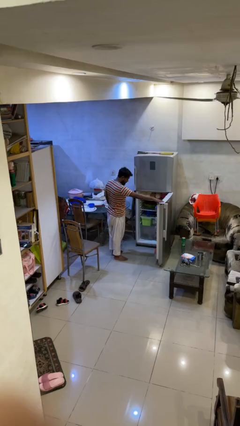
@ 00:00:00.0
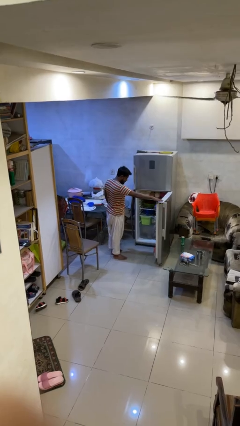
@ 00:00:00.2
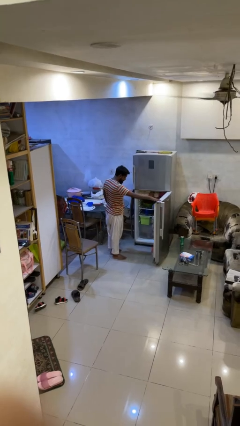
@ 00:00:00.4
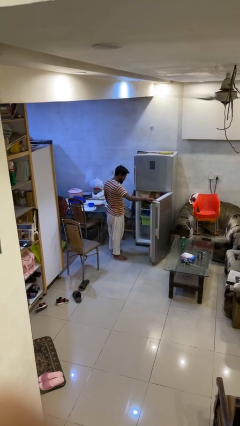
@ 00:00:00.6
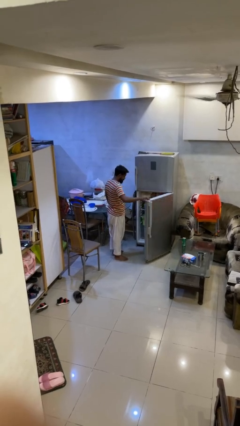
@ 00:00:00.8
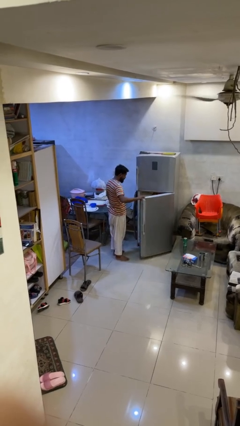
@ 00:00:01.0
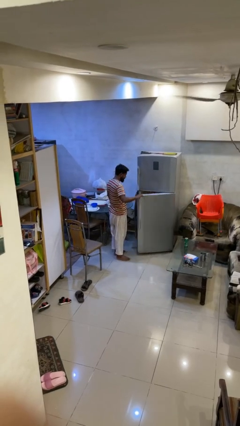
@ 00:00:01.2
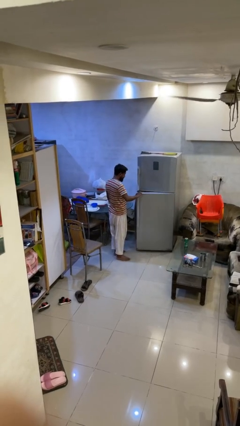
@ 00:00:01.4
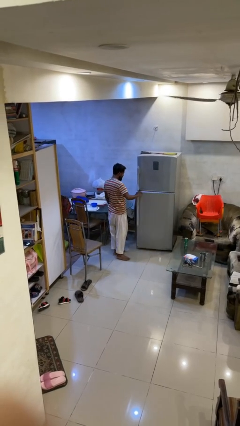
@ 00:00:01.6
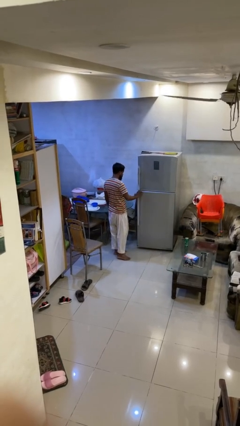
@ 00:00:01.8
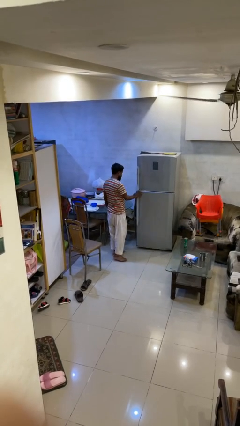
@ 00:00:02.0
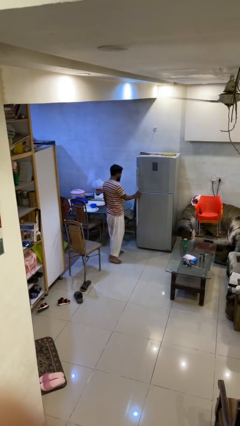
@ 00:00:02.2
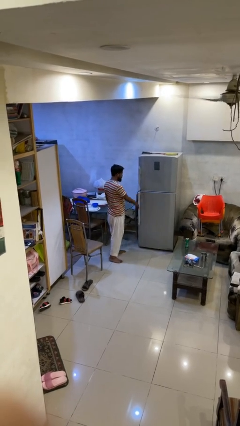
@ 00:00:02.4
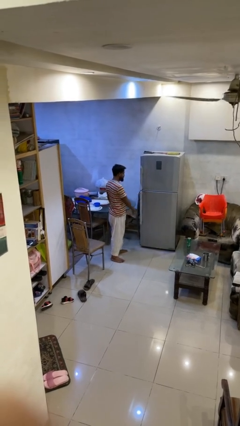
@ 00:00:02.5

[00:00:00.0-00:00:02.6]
person closes refrigerator

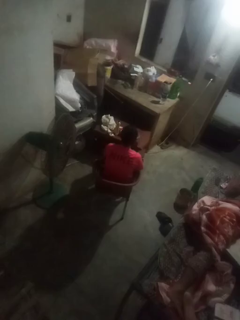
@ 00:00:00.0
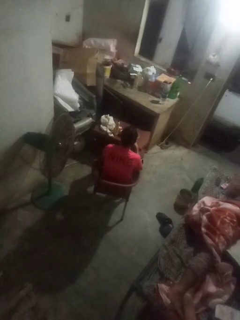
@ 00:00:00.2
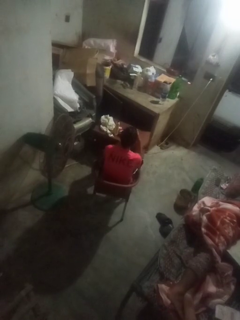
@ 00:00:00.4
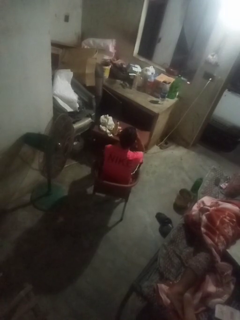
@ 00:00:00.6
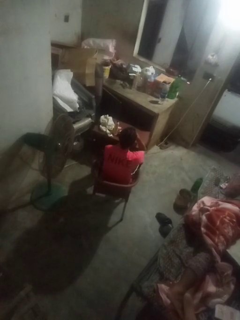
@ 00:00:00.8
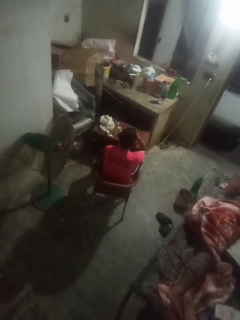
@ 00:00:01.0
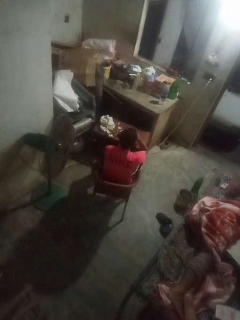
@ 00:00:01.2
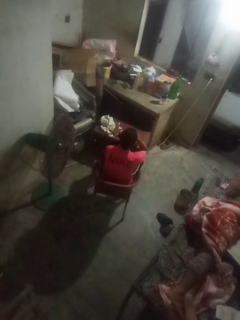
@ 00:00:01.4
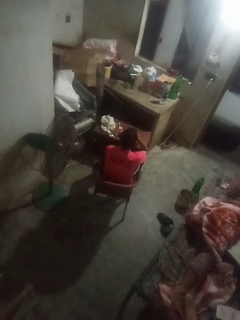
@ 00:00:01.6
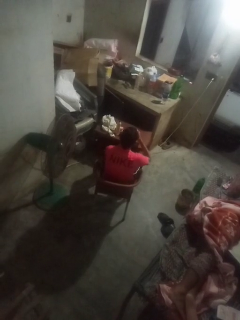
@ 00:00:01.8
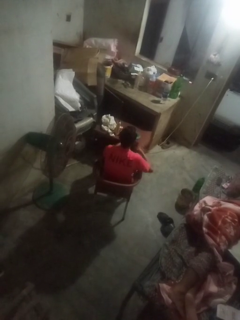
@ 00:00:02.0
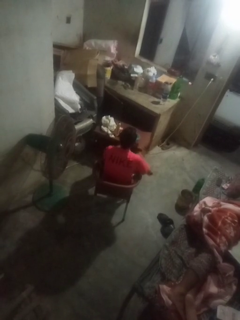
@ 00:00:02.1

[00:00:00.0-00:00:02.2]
person yawns

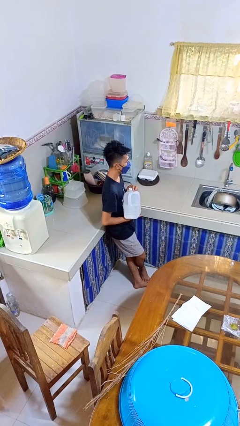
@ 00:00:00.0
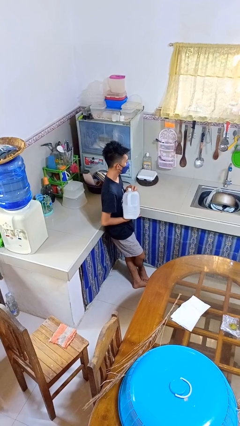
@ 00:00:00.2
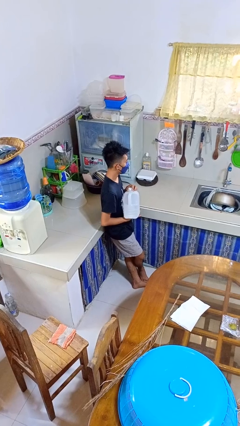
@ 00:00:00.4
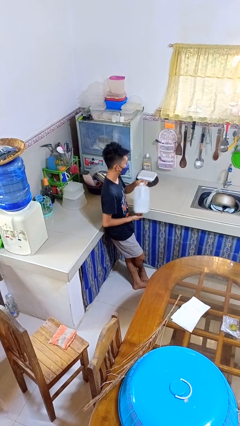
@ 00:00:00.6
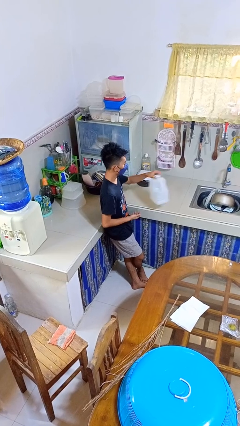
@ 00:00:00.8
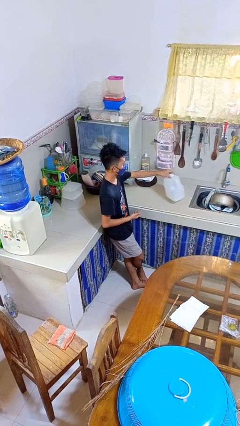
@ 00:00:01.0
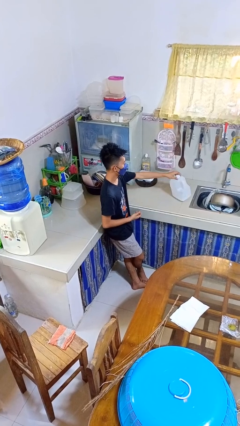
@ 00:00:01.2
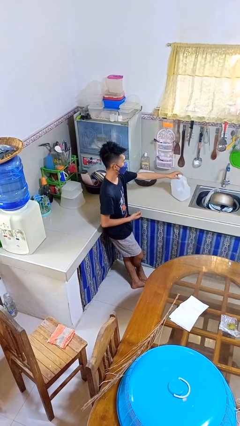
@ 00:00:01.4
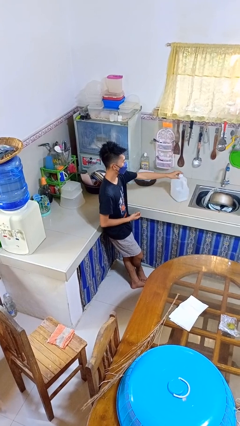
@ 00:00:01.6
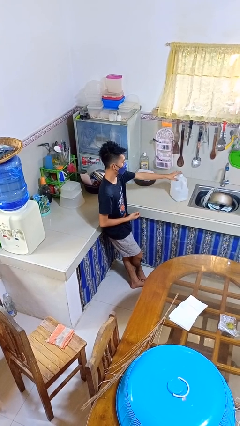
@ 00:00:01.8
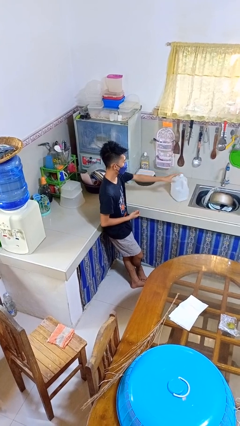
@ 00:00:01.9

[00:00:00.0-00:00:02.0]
person puts down object on countertop

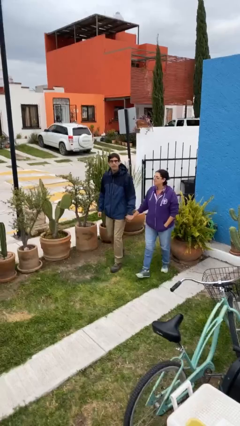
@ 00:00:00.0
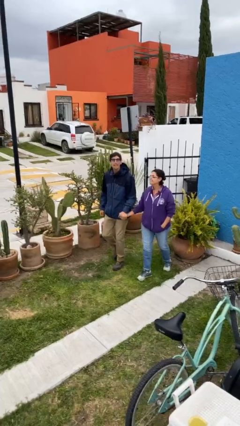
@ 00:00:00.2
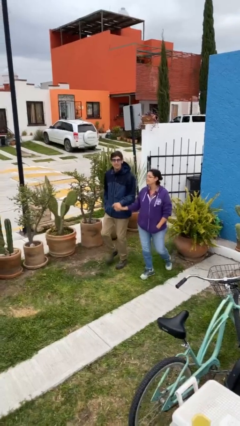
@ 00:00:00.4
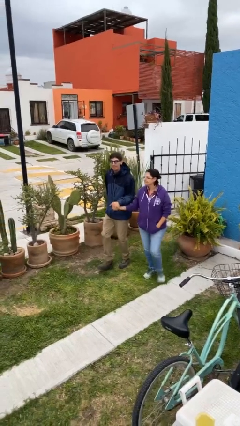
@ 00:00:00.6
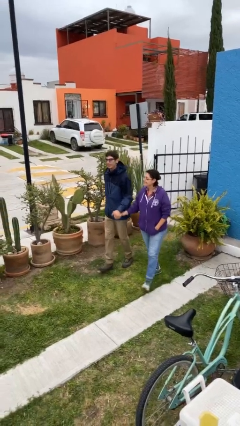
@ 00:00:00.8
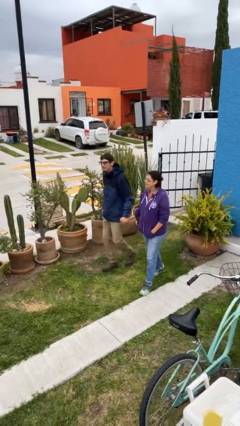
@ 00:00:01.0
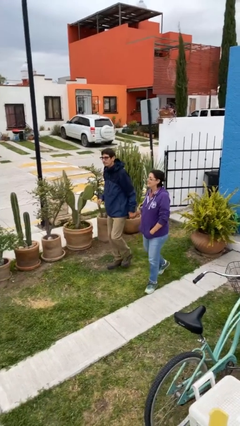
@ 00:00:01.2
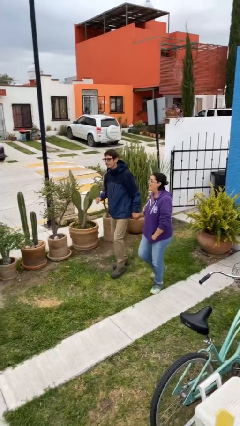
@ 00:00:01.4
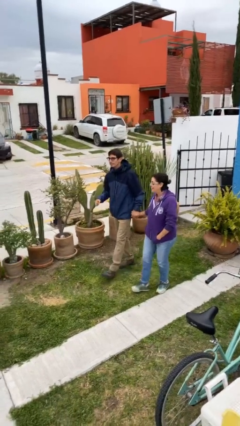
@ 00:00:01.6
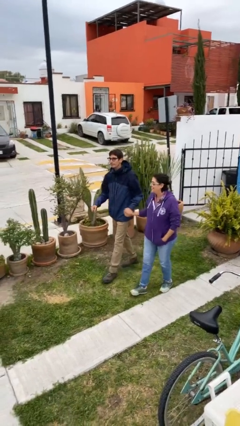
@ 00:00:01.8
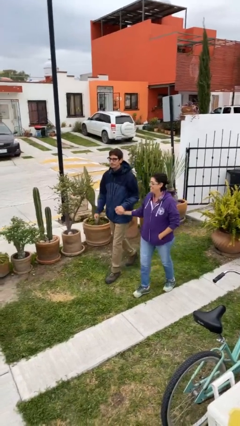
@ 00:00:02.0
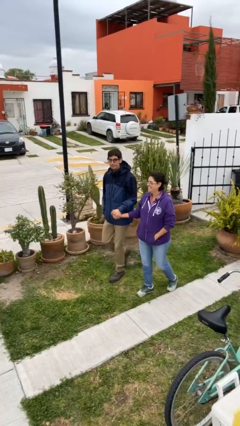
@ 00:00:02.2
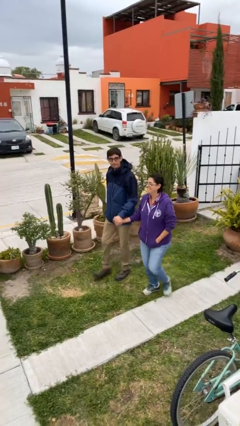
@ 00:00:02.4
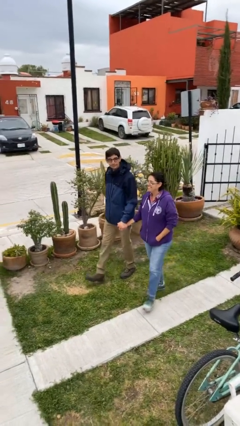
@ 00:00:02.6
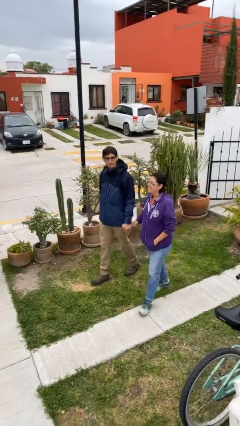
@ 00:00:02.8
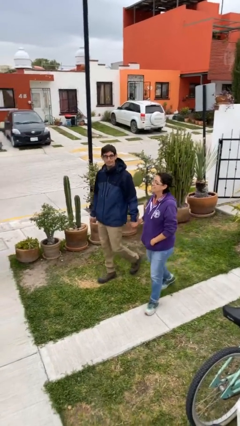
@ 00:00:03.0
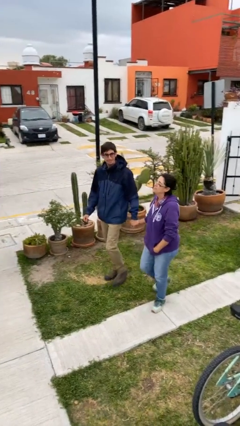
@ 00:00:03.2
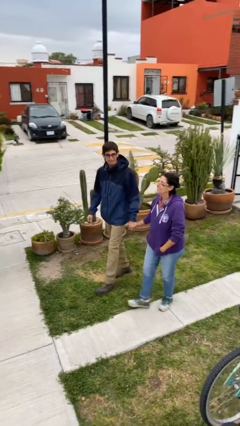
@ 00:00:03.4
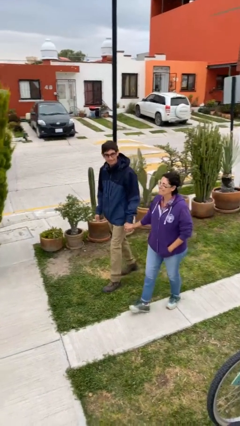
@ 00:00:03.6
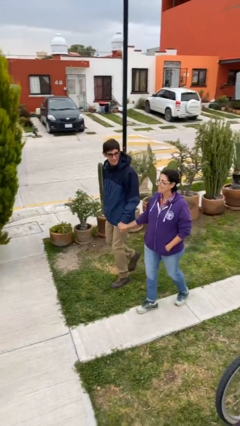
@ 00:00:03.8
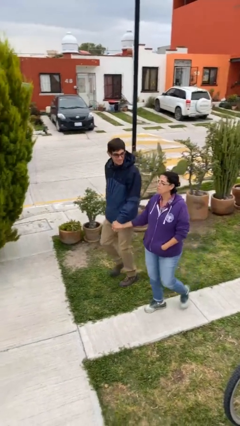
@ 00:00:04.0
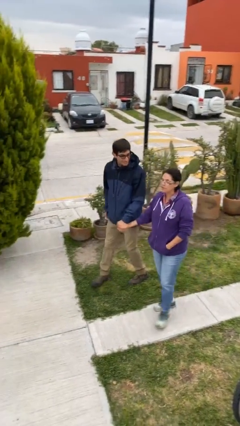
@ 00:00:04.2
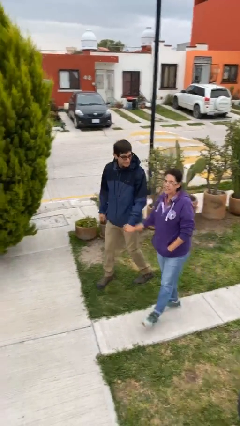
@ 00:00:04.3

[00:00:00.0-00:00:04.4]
person holds hand

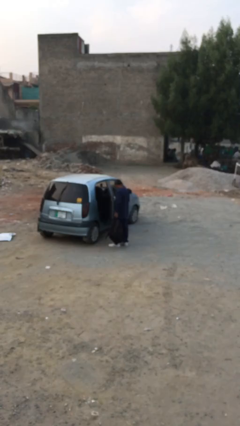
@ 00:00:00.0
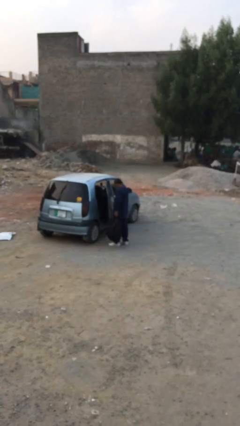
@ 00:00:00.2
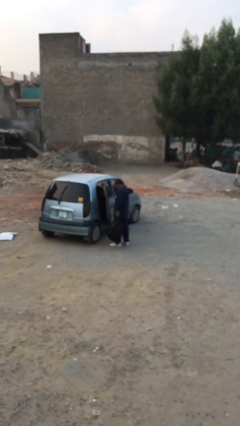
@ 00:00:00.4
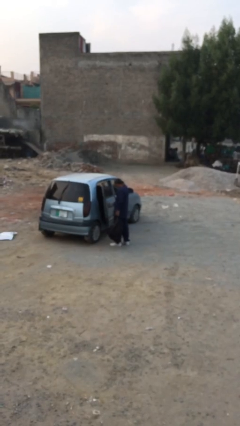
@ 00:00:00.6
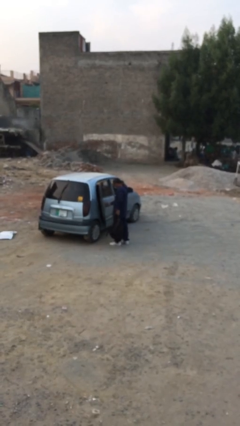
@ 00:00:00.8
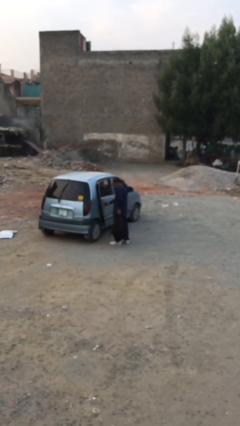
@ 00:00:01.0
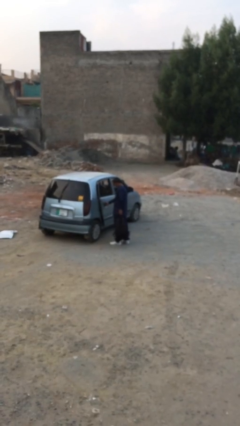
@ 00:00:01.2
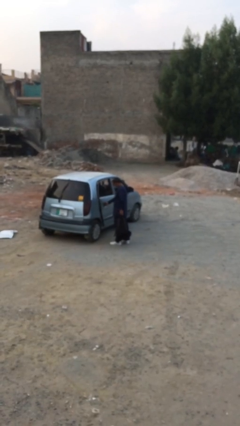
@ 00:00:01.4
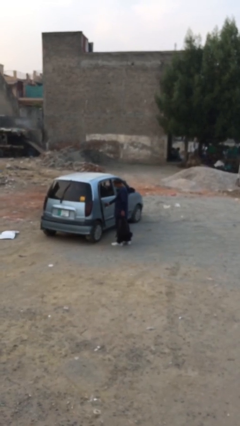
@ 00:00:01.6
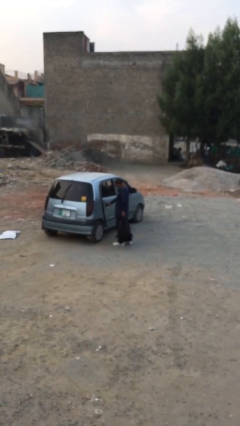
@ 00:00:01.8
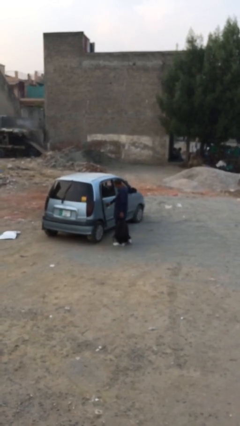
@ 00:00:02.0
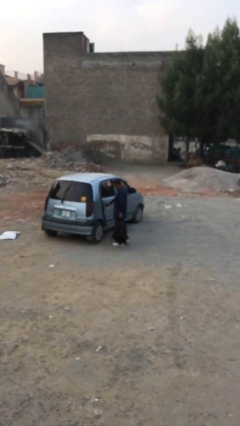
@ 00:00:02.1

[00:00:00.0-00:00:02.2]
person closes car door

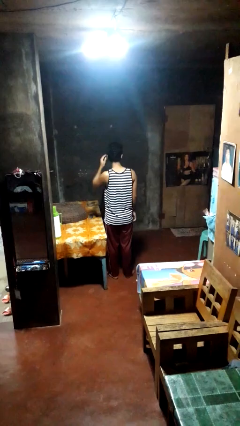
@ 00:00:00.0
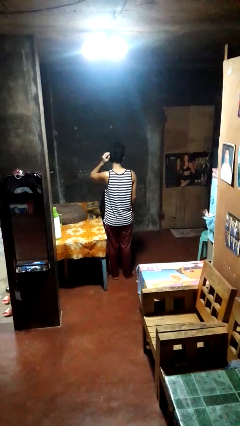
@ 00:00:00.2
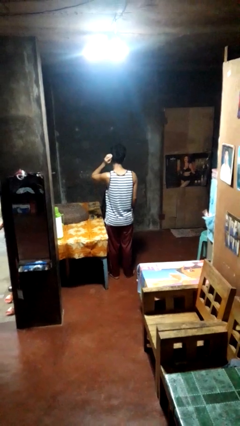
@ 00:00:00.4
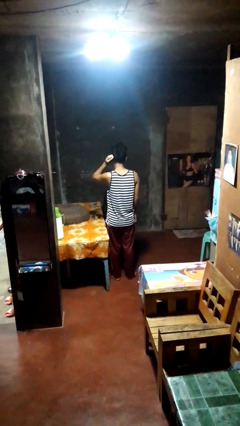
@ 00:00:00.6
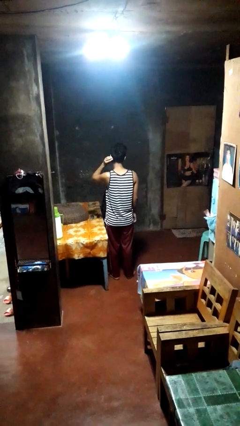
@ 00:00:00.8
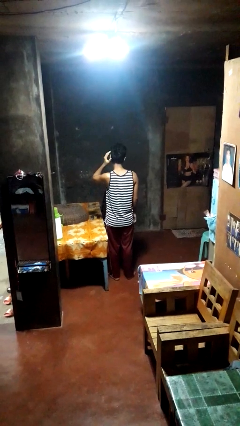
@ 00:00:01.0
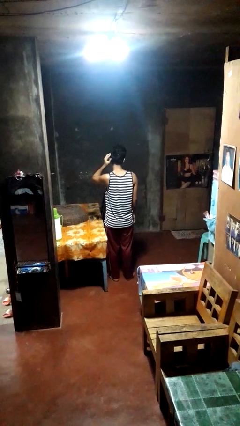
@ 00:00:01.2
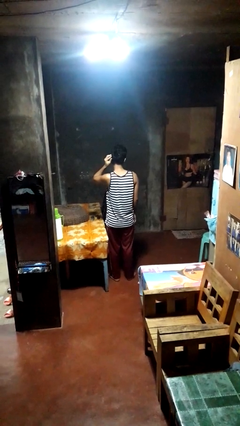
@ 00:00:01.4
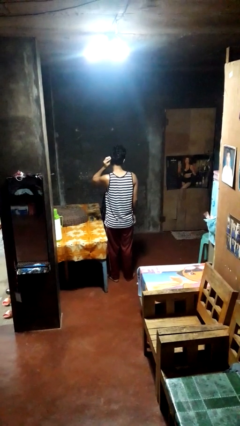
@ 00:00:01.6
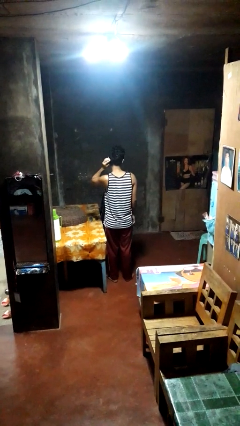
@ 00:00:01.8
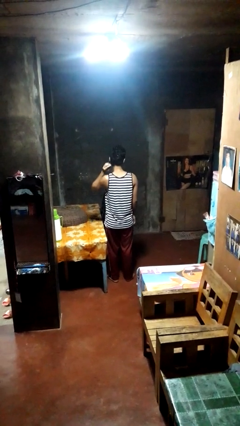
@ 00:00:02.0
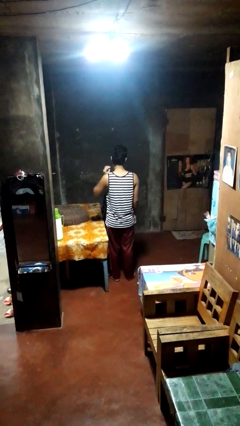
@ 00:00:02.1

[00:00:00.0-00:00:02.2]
person strokes hair

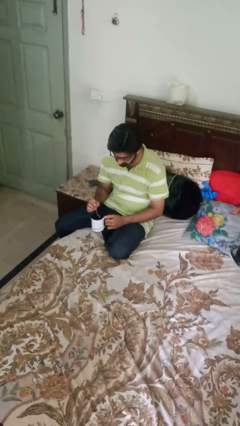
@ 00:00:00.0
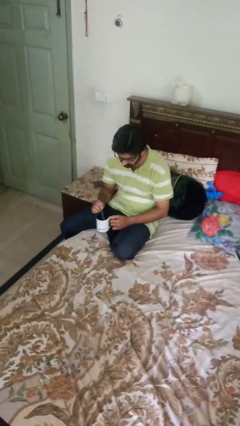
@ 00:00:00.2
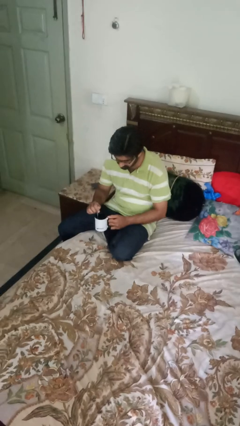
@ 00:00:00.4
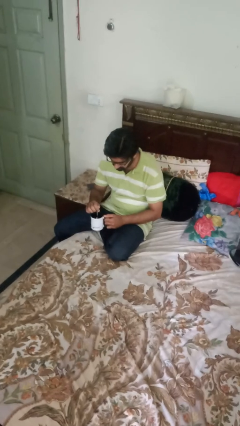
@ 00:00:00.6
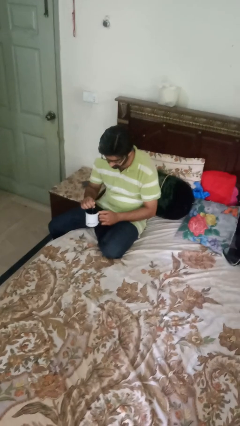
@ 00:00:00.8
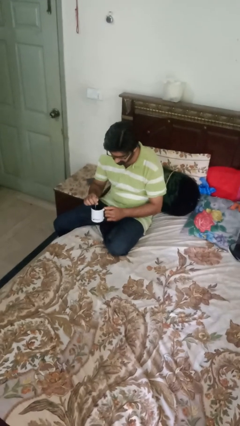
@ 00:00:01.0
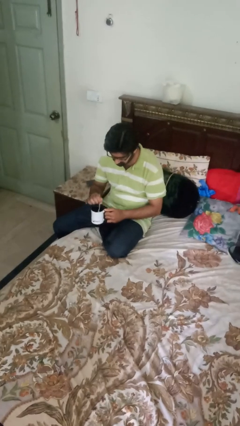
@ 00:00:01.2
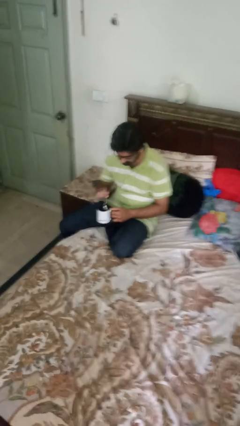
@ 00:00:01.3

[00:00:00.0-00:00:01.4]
person stirs mug

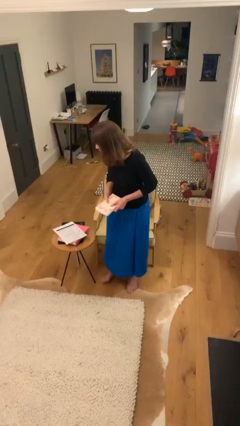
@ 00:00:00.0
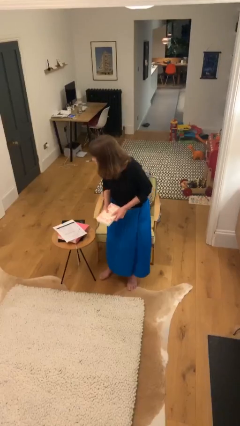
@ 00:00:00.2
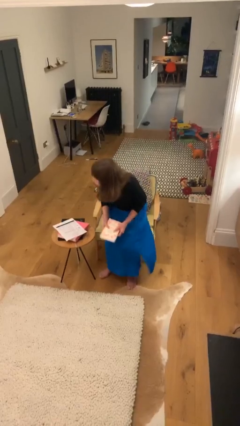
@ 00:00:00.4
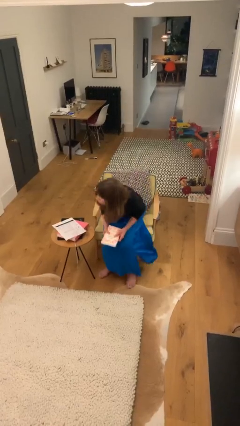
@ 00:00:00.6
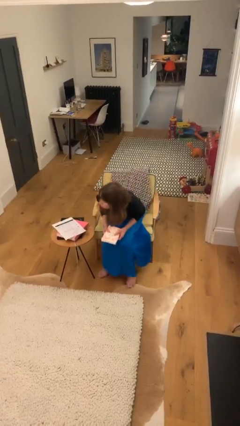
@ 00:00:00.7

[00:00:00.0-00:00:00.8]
person sits down
